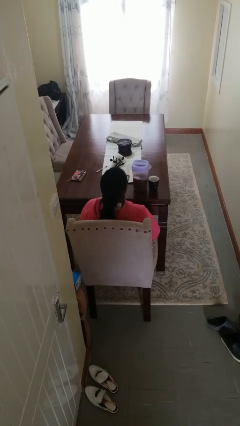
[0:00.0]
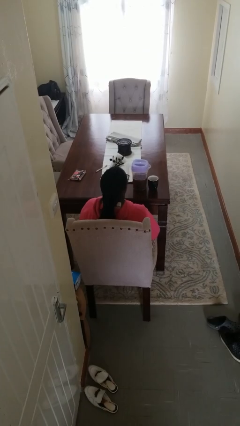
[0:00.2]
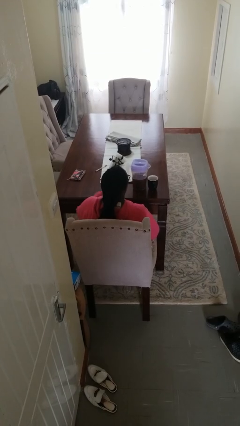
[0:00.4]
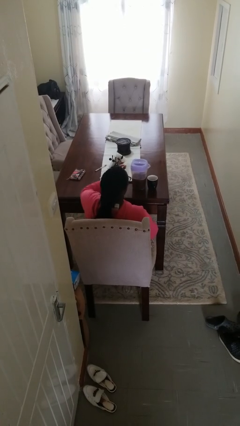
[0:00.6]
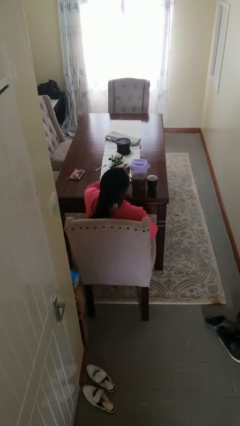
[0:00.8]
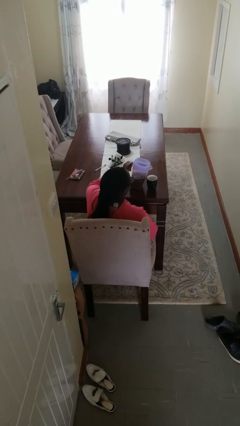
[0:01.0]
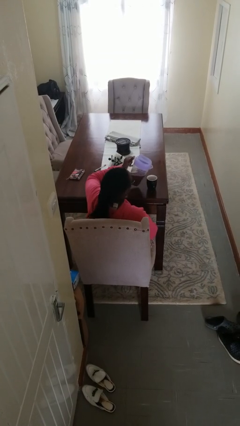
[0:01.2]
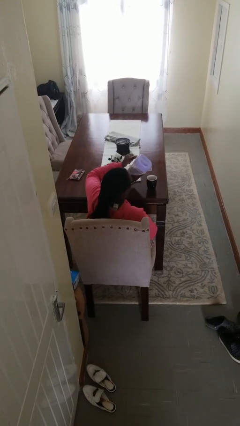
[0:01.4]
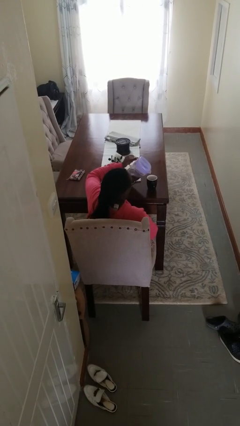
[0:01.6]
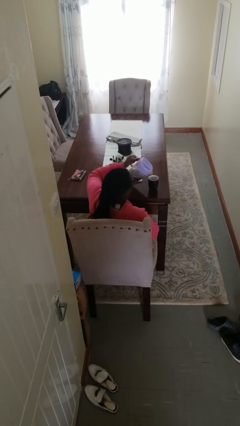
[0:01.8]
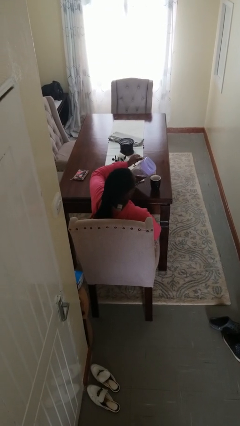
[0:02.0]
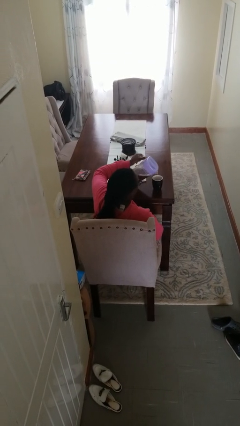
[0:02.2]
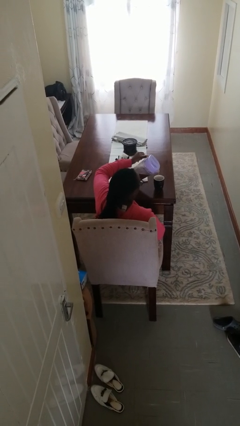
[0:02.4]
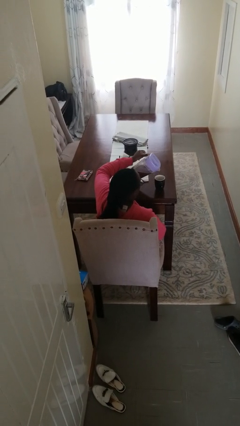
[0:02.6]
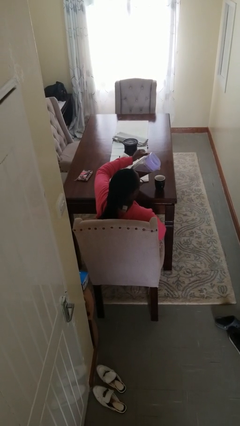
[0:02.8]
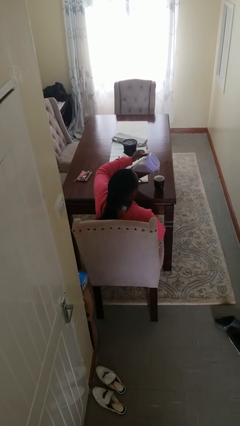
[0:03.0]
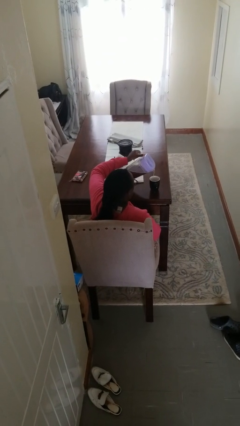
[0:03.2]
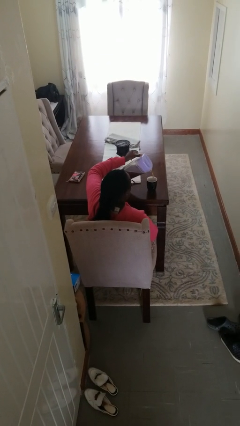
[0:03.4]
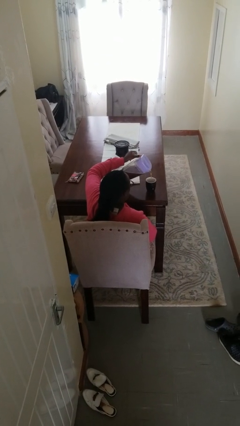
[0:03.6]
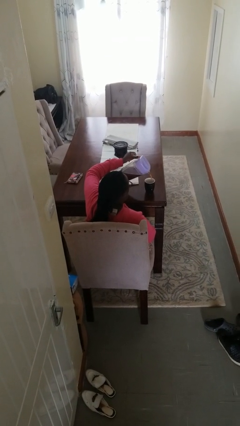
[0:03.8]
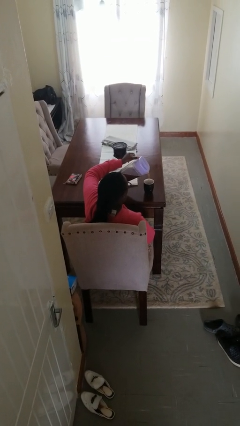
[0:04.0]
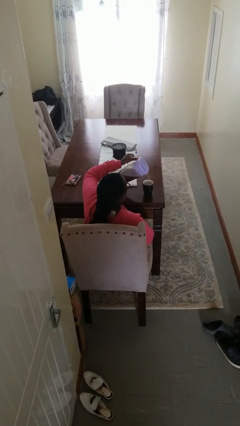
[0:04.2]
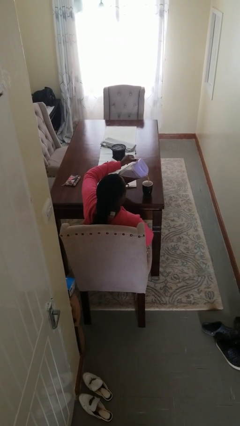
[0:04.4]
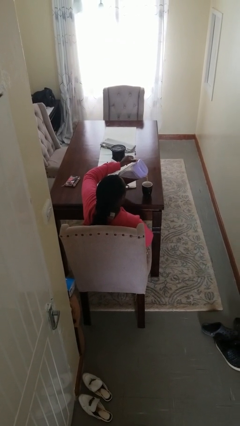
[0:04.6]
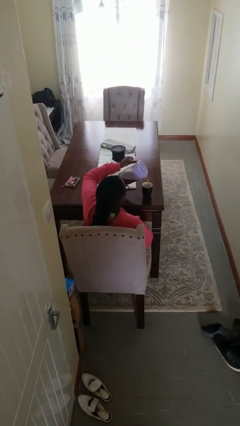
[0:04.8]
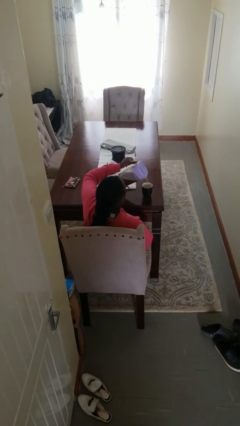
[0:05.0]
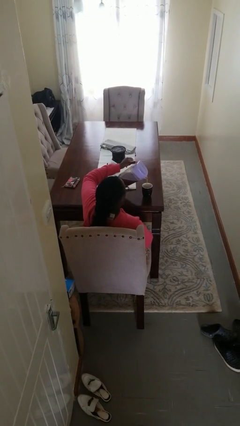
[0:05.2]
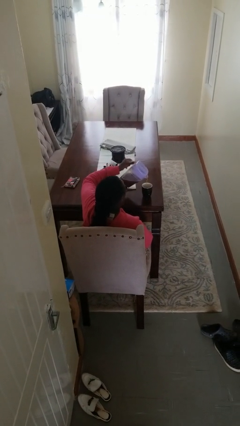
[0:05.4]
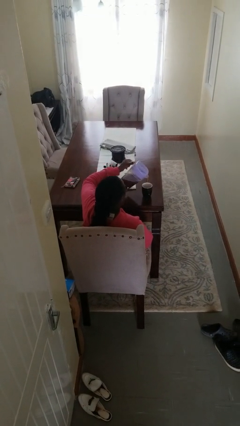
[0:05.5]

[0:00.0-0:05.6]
person pours coffee into mug

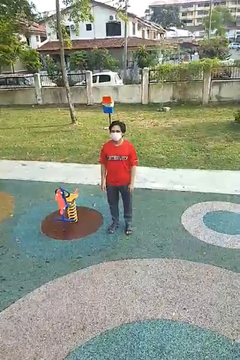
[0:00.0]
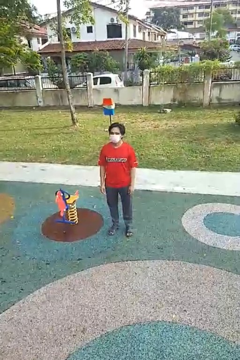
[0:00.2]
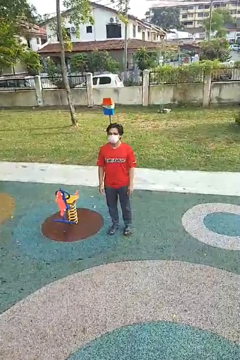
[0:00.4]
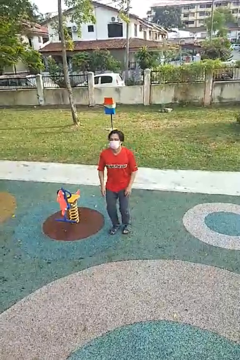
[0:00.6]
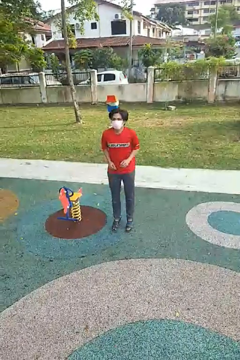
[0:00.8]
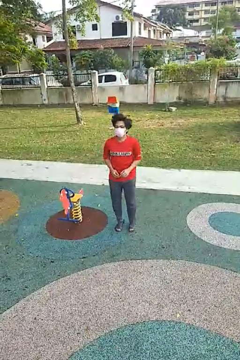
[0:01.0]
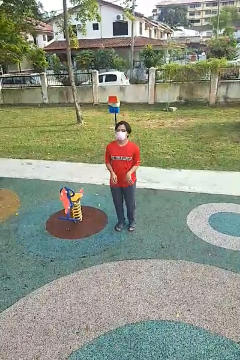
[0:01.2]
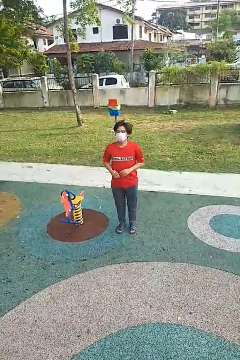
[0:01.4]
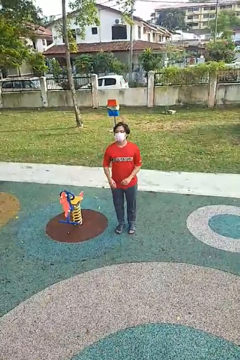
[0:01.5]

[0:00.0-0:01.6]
person jumps

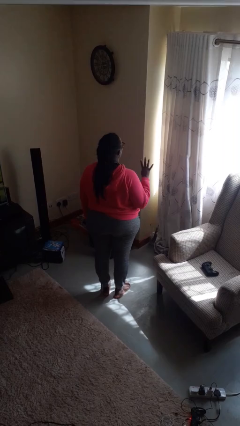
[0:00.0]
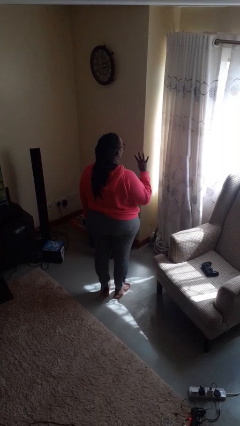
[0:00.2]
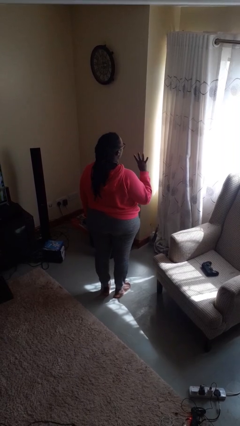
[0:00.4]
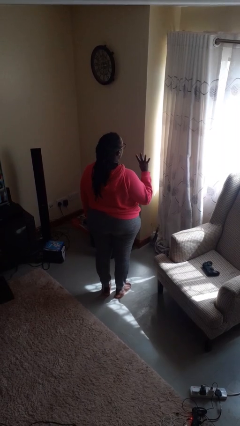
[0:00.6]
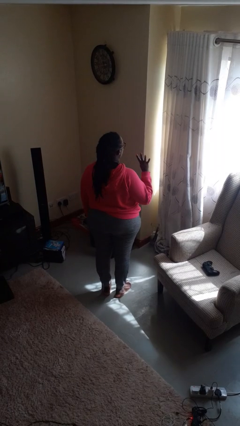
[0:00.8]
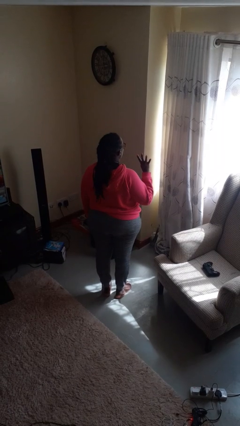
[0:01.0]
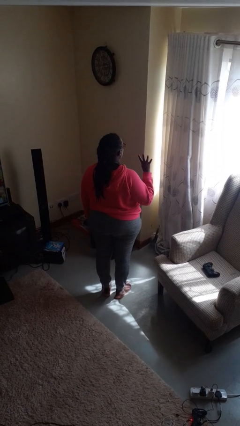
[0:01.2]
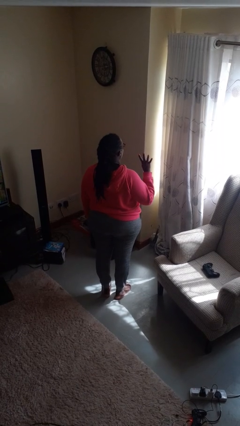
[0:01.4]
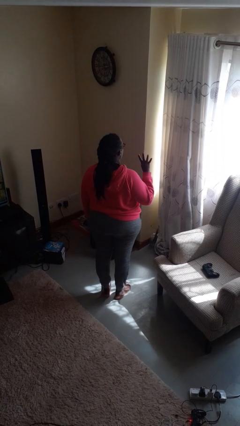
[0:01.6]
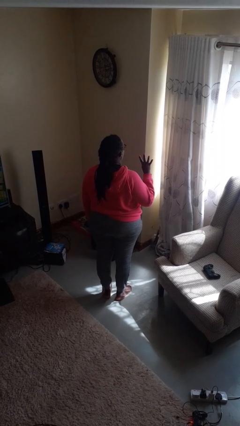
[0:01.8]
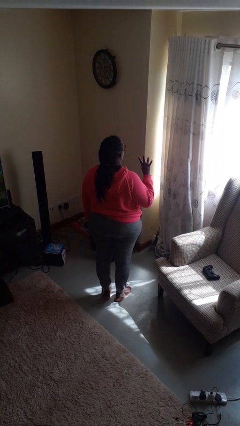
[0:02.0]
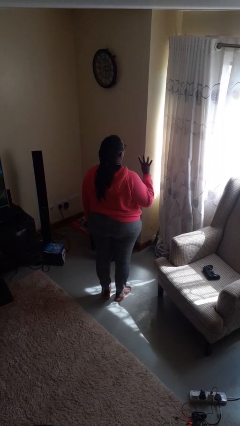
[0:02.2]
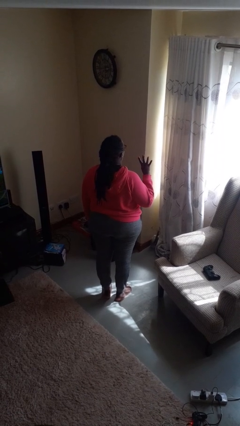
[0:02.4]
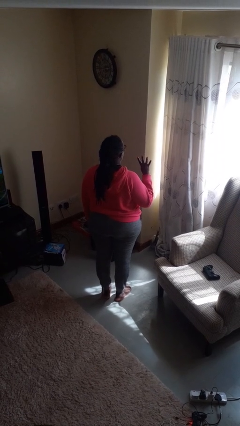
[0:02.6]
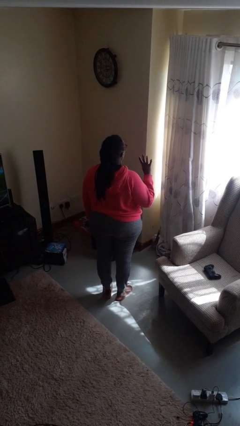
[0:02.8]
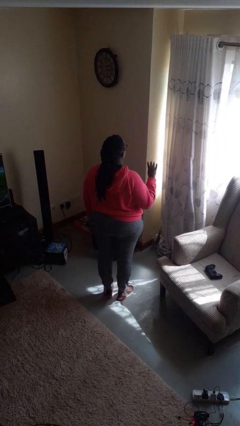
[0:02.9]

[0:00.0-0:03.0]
person gestures number four

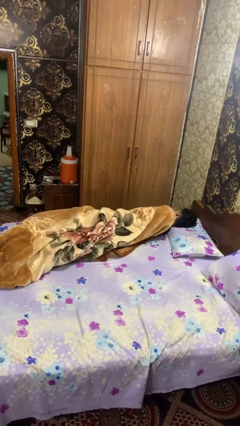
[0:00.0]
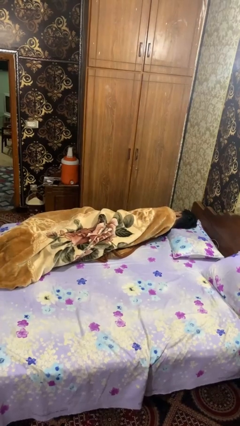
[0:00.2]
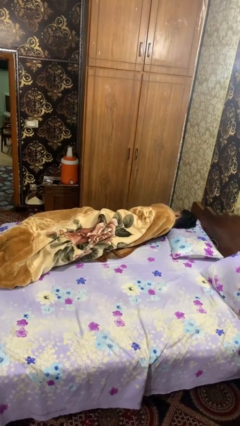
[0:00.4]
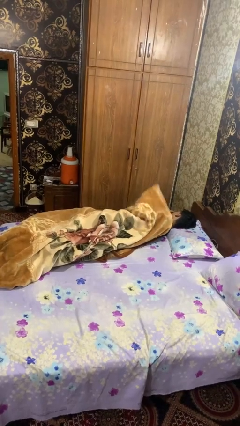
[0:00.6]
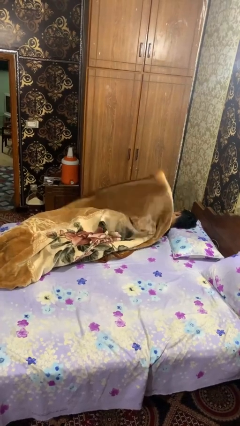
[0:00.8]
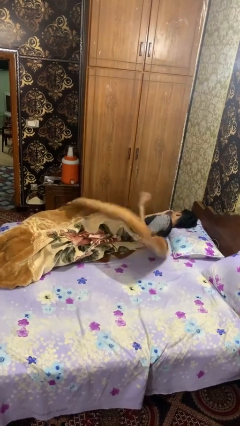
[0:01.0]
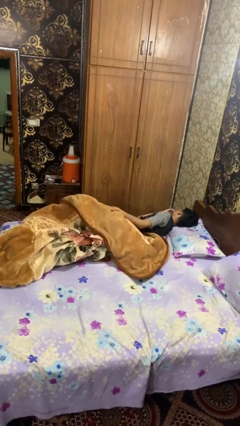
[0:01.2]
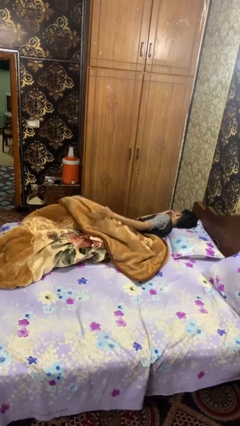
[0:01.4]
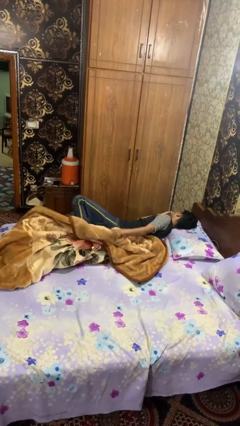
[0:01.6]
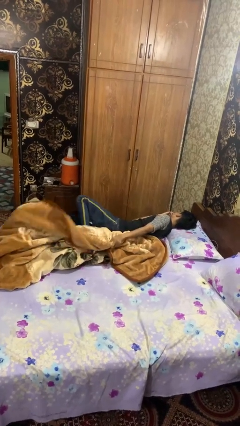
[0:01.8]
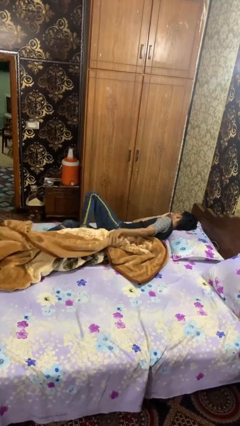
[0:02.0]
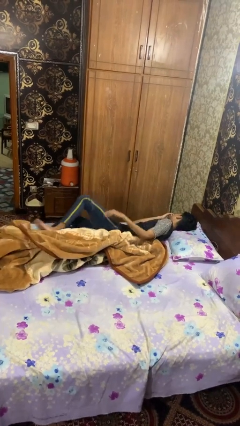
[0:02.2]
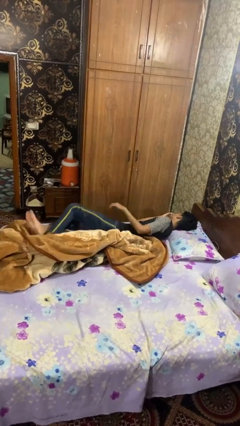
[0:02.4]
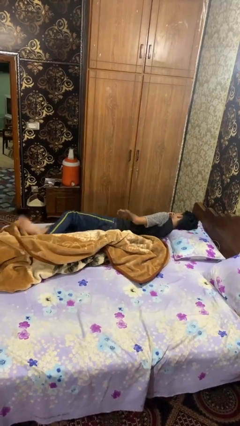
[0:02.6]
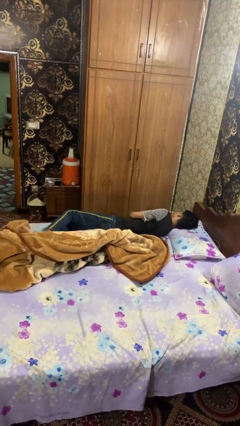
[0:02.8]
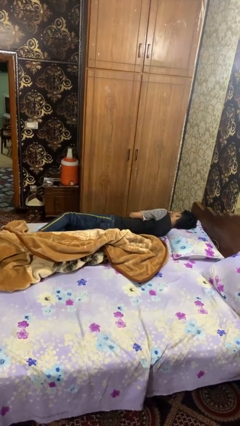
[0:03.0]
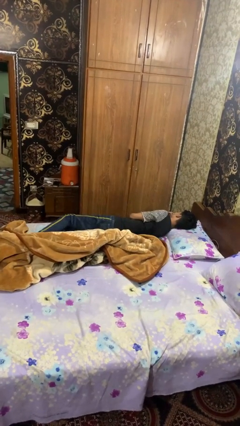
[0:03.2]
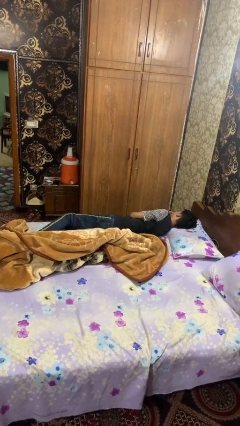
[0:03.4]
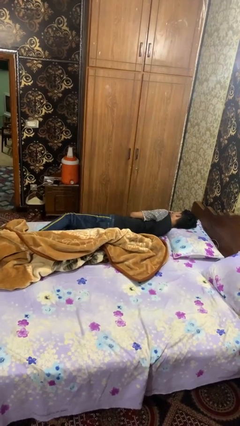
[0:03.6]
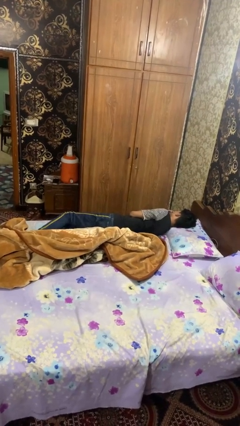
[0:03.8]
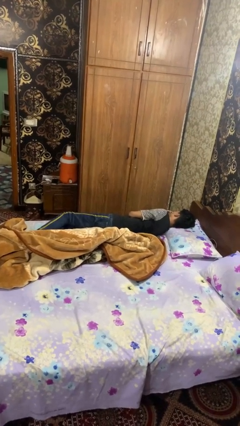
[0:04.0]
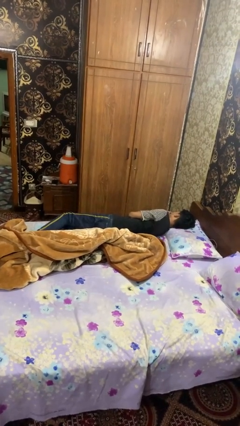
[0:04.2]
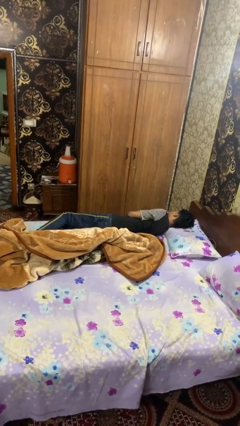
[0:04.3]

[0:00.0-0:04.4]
person uncovers with blanket

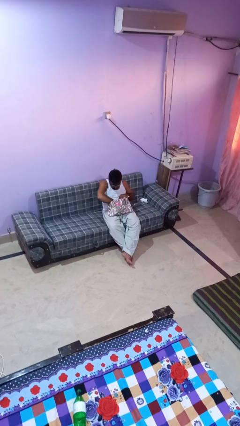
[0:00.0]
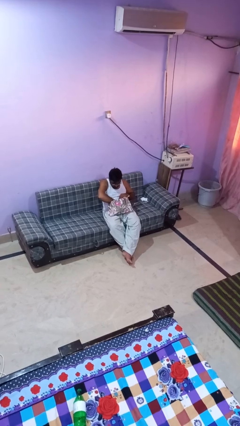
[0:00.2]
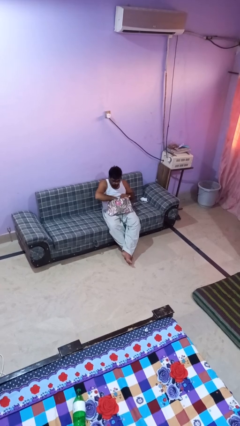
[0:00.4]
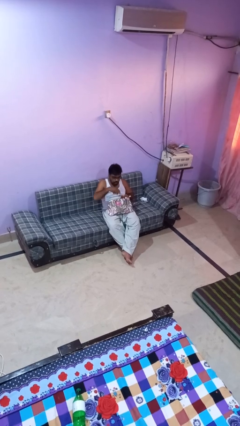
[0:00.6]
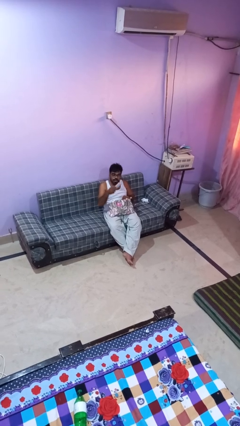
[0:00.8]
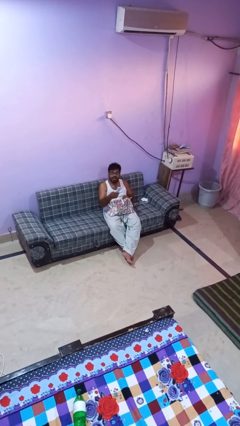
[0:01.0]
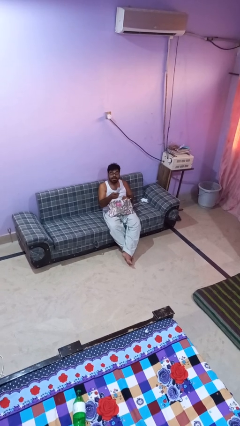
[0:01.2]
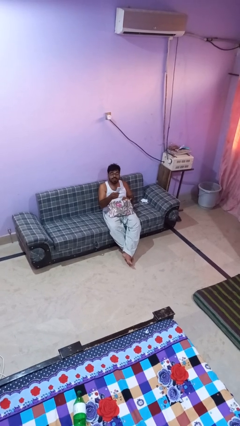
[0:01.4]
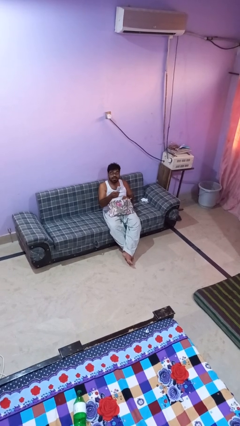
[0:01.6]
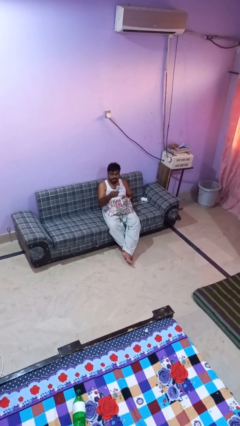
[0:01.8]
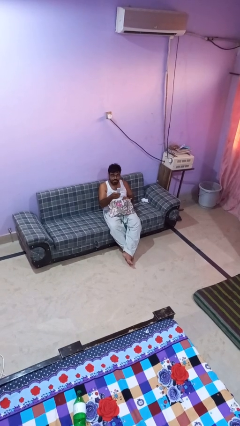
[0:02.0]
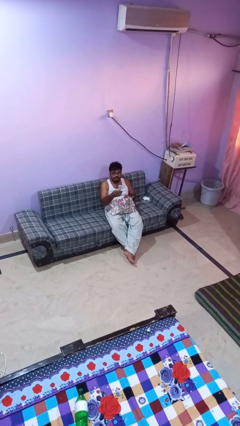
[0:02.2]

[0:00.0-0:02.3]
person takes object from purse

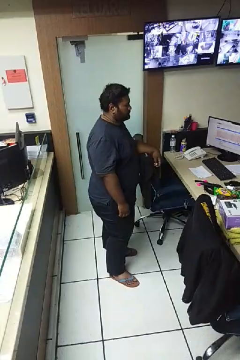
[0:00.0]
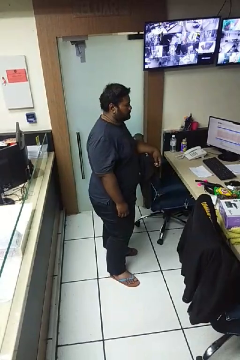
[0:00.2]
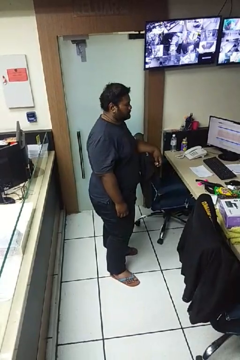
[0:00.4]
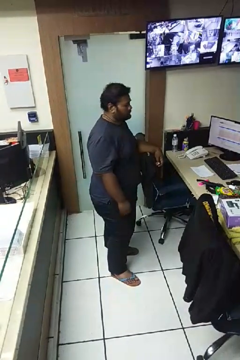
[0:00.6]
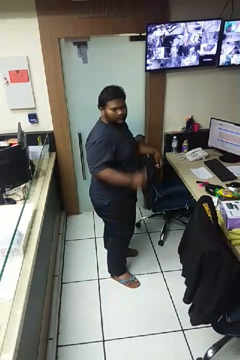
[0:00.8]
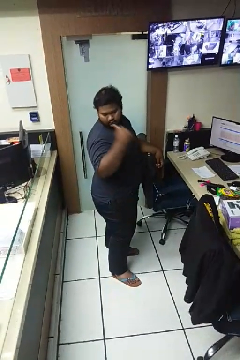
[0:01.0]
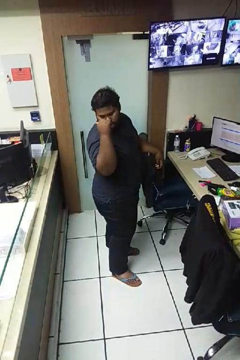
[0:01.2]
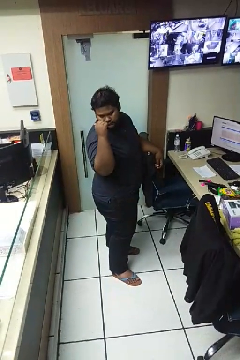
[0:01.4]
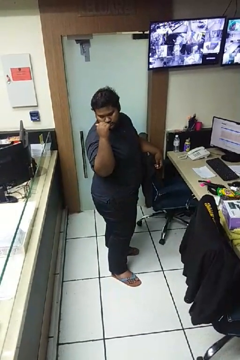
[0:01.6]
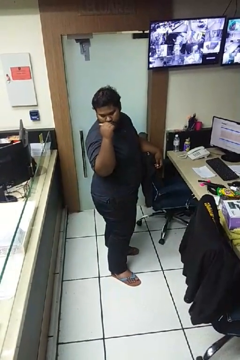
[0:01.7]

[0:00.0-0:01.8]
person gestures behind me
